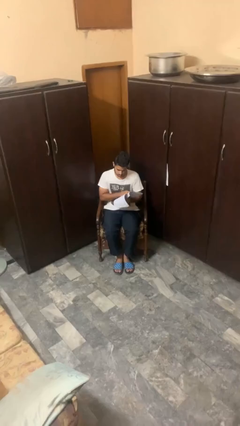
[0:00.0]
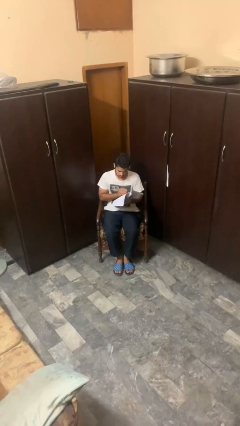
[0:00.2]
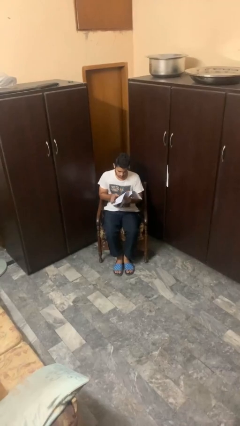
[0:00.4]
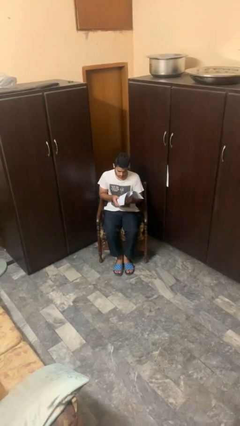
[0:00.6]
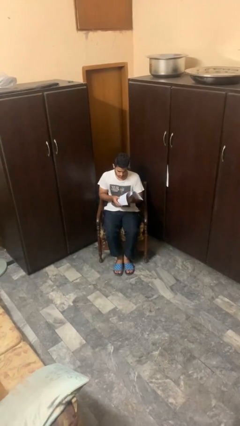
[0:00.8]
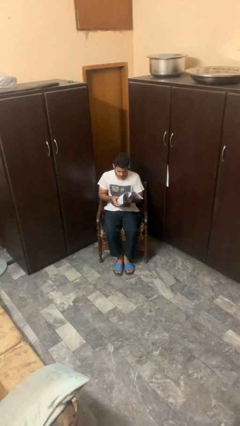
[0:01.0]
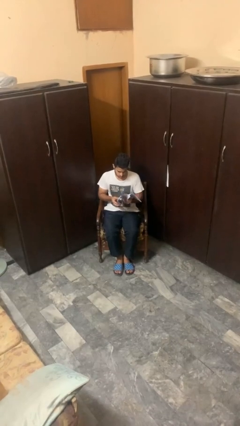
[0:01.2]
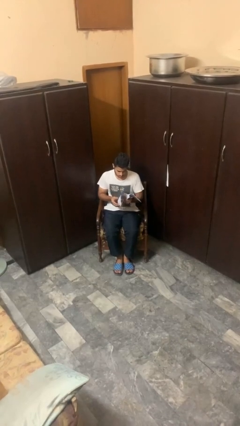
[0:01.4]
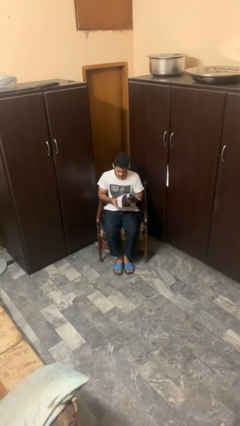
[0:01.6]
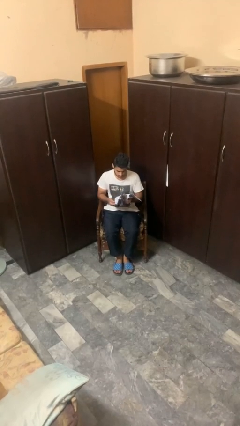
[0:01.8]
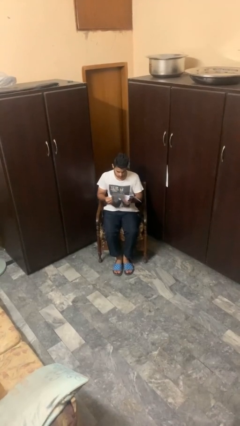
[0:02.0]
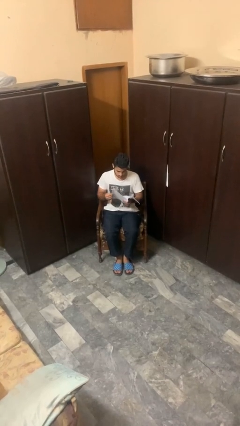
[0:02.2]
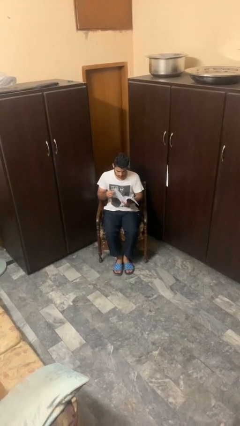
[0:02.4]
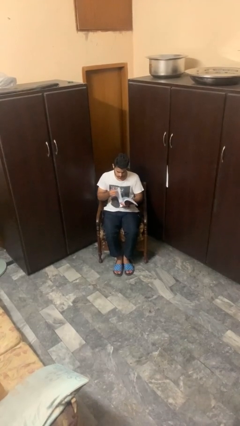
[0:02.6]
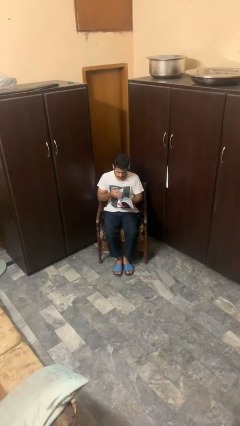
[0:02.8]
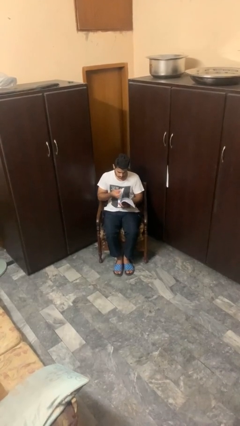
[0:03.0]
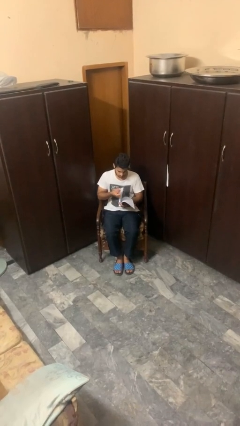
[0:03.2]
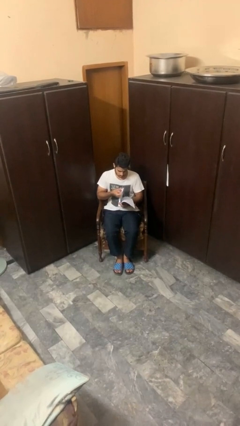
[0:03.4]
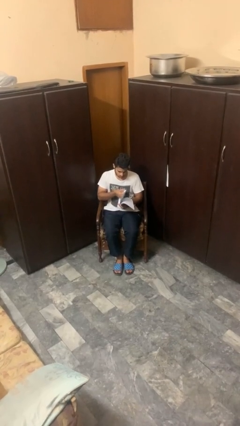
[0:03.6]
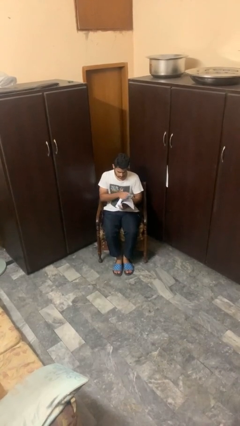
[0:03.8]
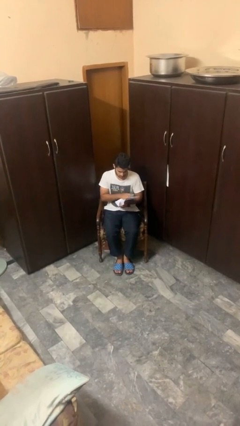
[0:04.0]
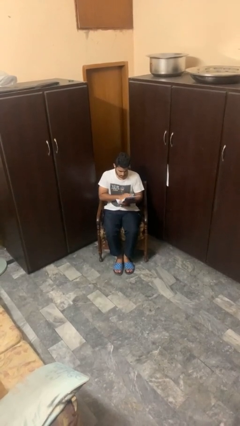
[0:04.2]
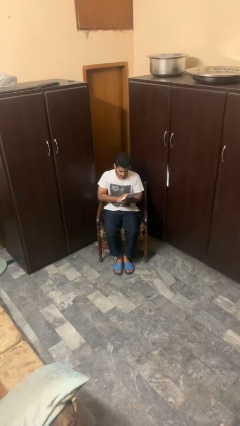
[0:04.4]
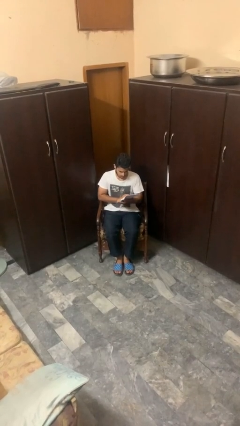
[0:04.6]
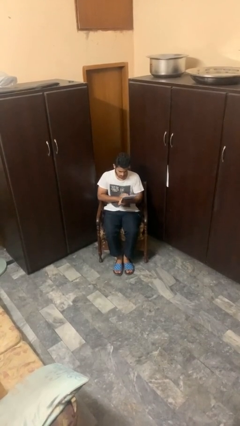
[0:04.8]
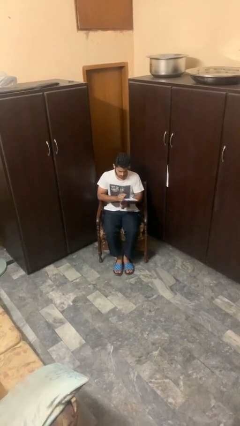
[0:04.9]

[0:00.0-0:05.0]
person reads magazine

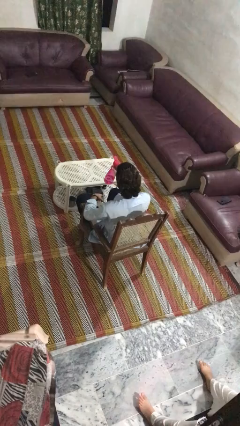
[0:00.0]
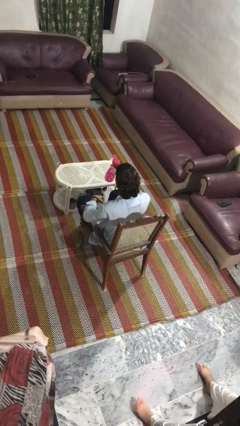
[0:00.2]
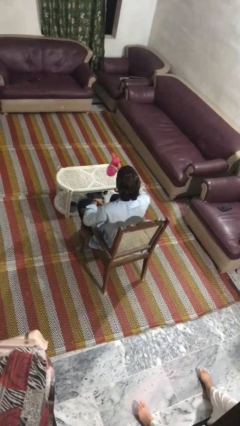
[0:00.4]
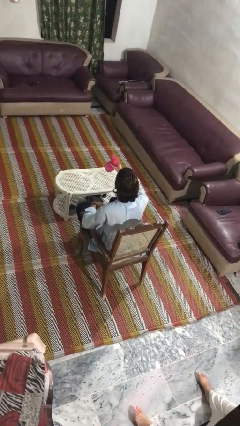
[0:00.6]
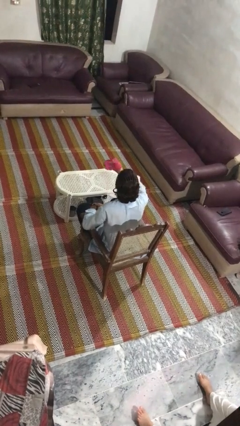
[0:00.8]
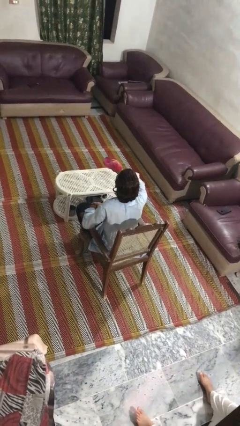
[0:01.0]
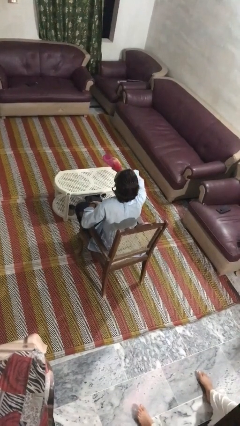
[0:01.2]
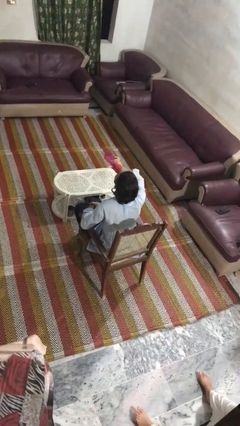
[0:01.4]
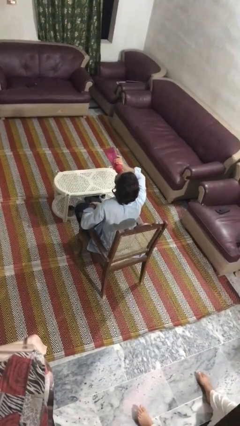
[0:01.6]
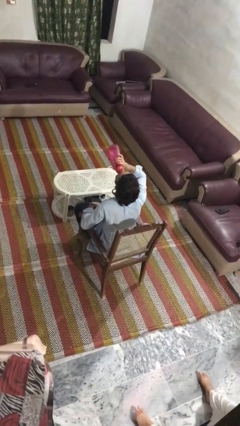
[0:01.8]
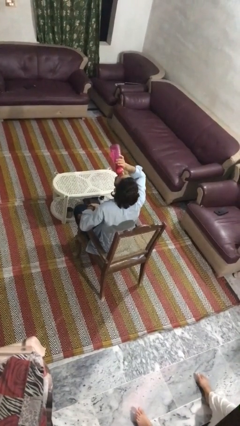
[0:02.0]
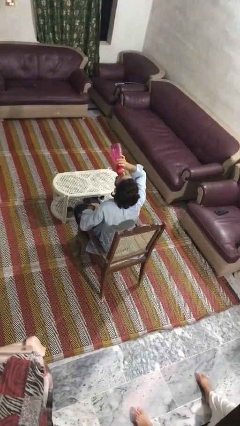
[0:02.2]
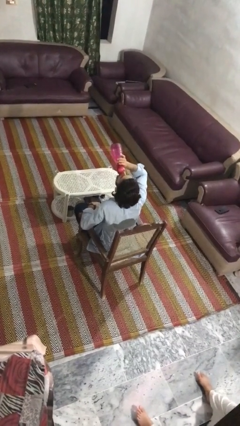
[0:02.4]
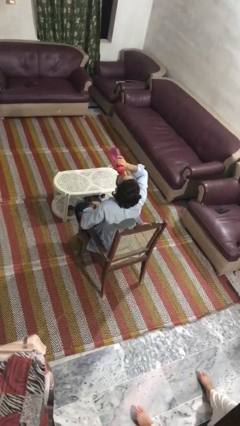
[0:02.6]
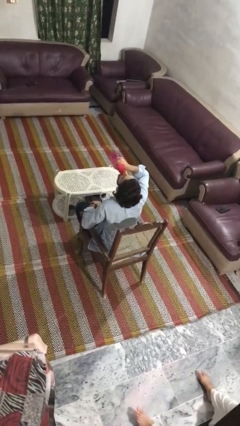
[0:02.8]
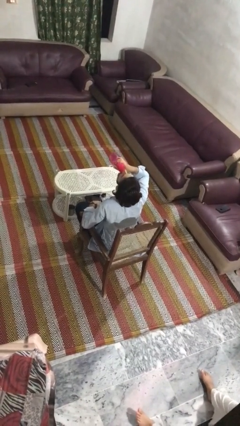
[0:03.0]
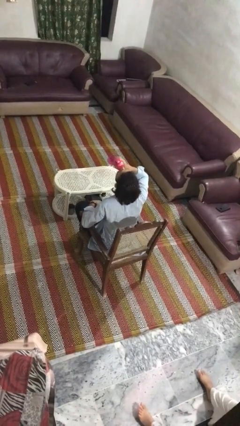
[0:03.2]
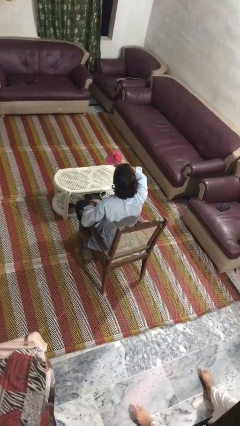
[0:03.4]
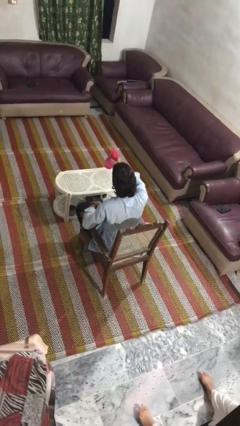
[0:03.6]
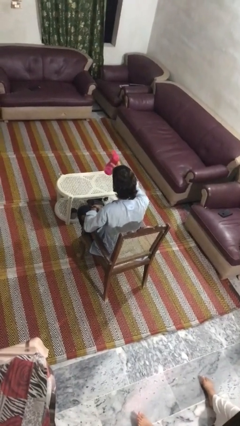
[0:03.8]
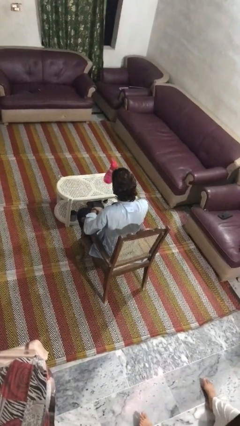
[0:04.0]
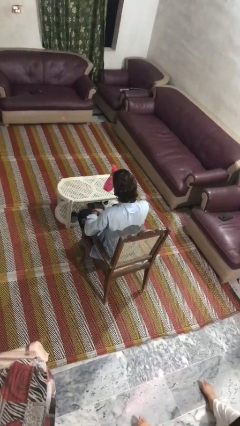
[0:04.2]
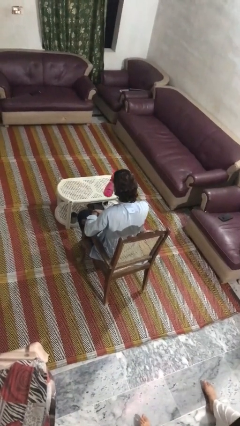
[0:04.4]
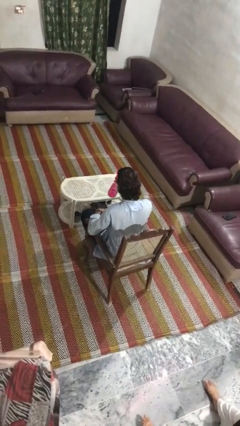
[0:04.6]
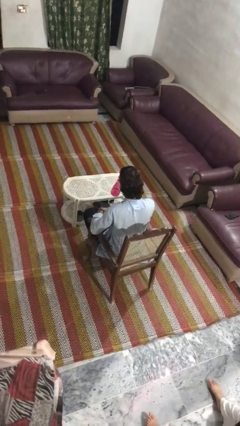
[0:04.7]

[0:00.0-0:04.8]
person drinks from bottle

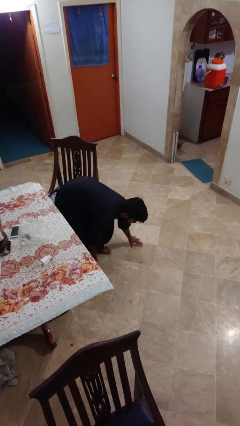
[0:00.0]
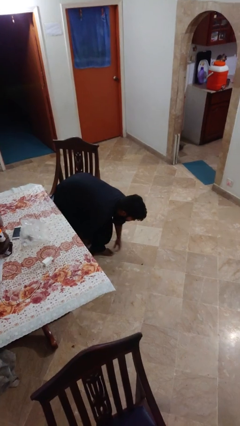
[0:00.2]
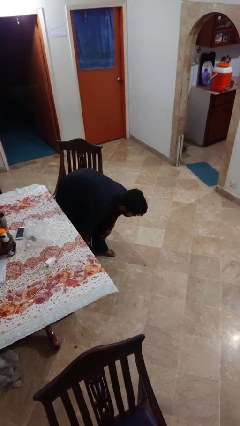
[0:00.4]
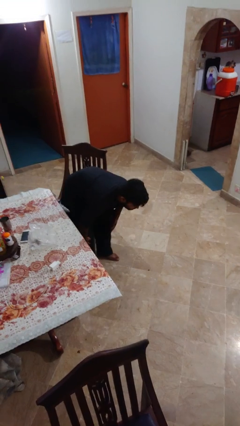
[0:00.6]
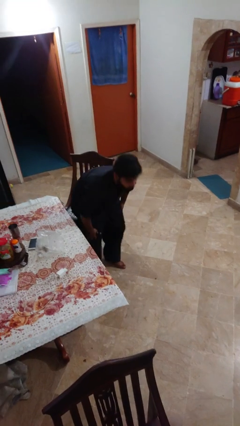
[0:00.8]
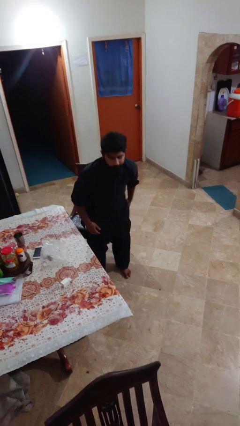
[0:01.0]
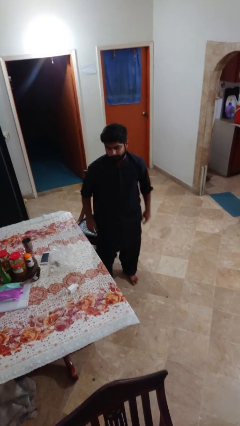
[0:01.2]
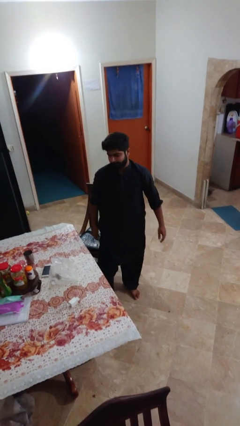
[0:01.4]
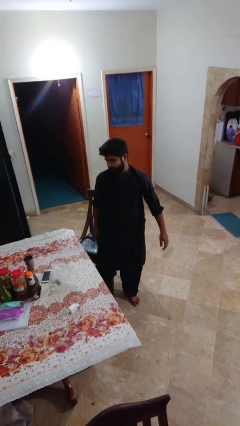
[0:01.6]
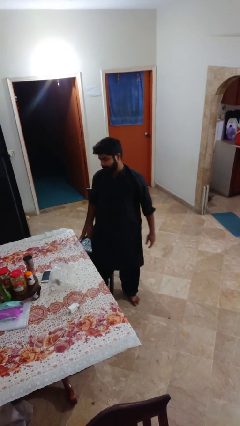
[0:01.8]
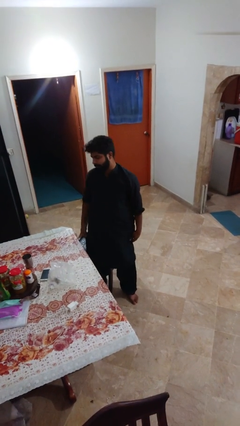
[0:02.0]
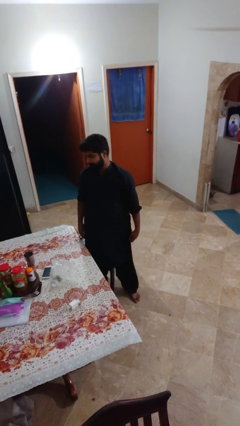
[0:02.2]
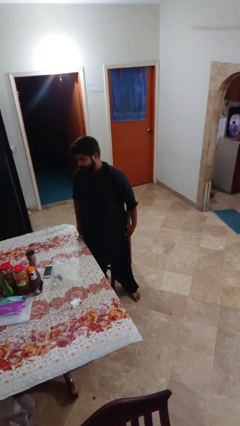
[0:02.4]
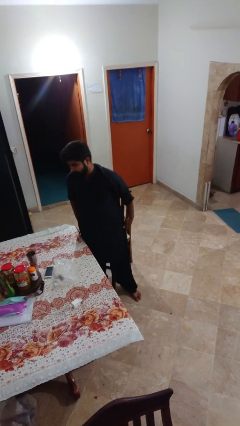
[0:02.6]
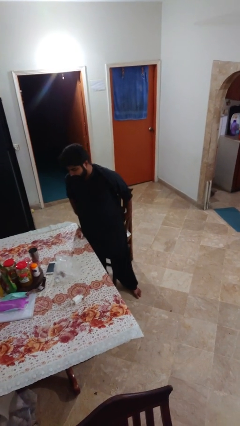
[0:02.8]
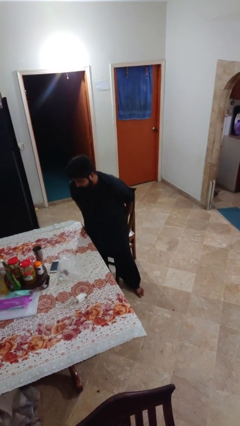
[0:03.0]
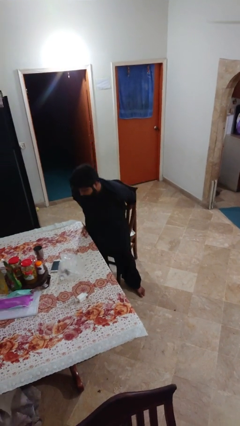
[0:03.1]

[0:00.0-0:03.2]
person stands up from floor

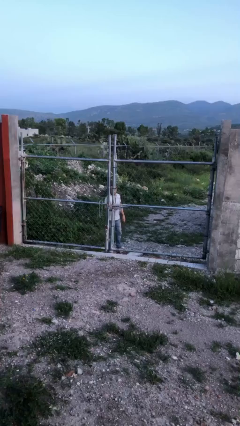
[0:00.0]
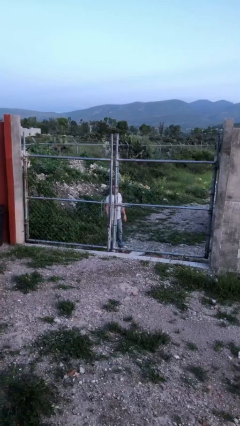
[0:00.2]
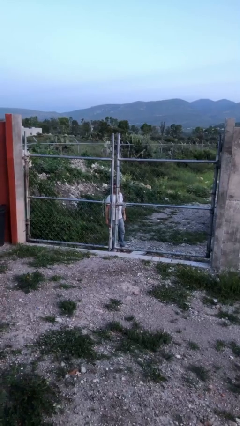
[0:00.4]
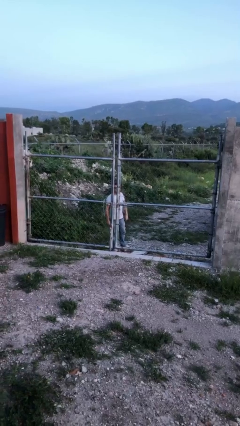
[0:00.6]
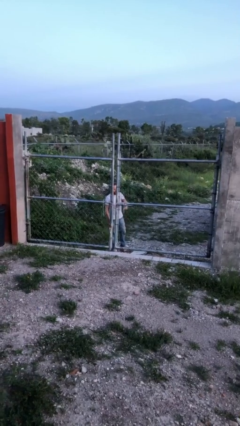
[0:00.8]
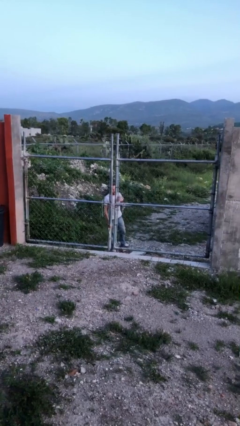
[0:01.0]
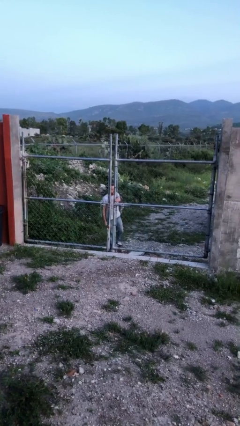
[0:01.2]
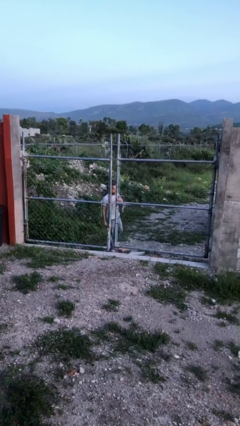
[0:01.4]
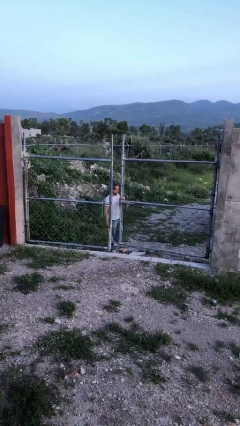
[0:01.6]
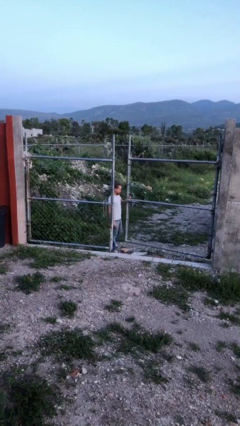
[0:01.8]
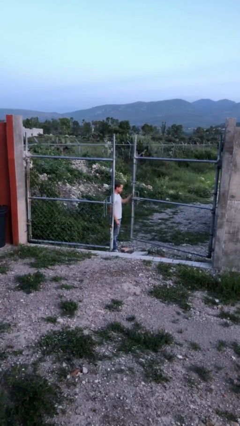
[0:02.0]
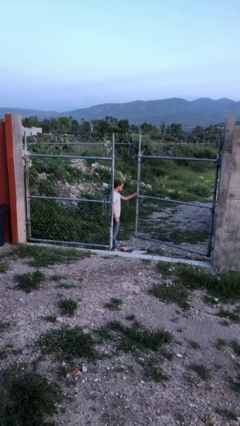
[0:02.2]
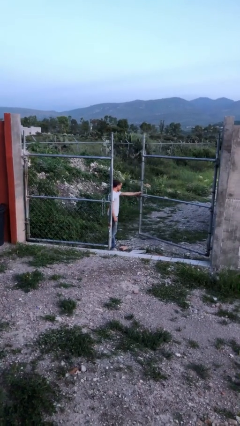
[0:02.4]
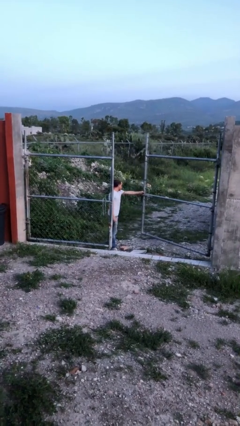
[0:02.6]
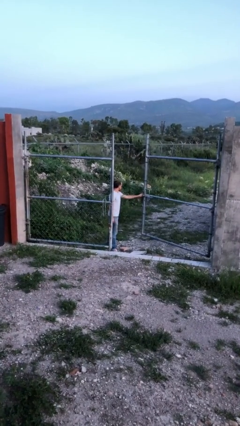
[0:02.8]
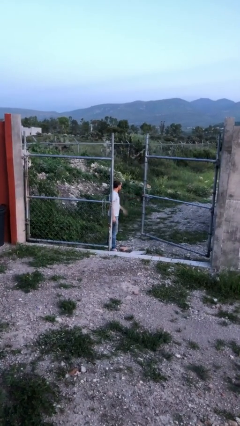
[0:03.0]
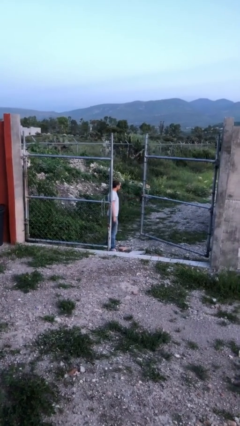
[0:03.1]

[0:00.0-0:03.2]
person opens gate

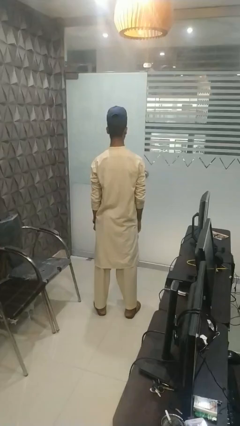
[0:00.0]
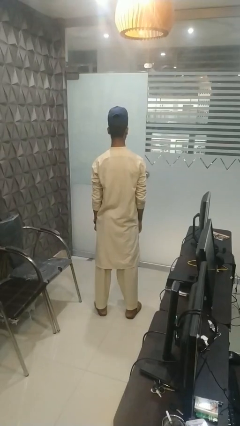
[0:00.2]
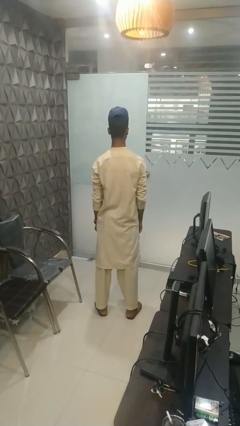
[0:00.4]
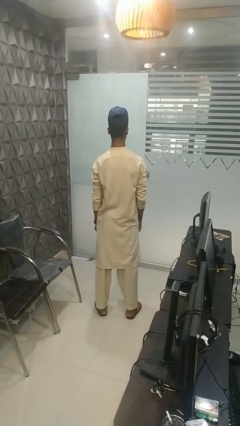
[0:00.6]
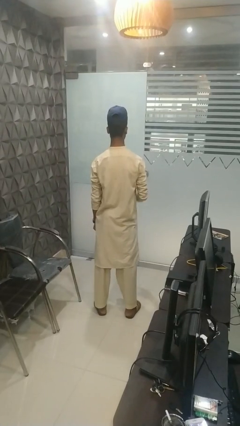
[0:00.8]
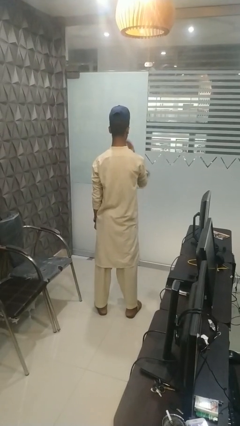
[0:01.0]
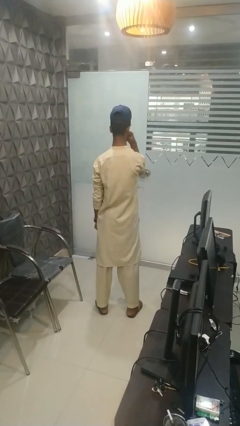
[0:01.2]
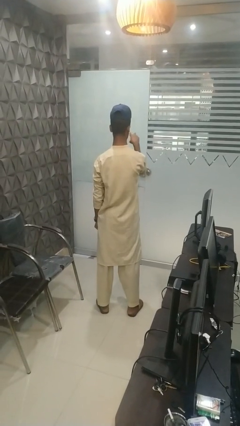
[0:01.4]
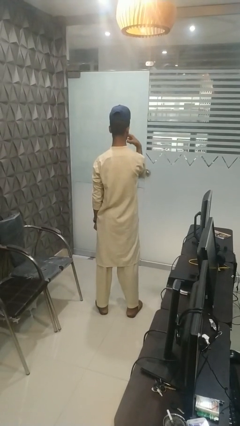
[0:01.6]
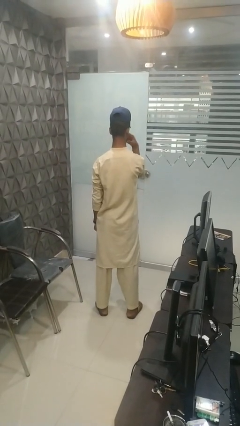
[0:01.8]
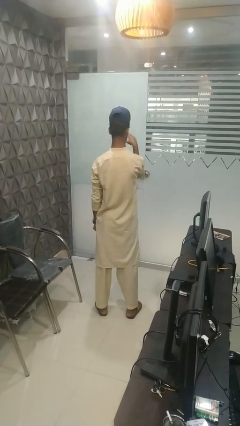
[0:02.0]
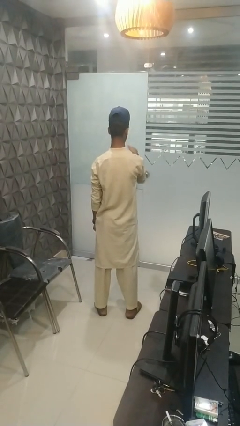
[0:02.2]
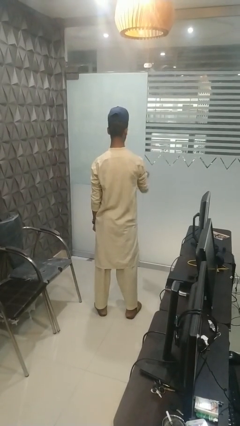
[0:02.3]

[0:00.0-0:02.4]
person gestures watch closely
